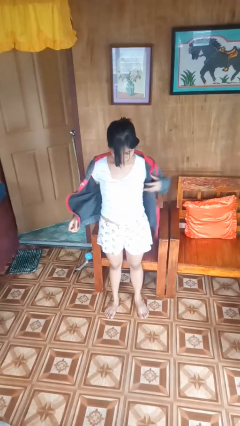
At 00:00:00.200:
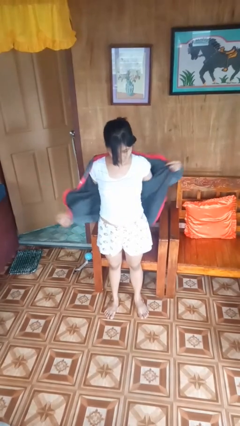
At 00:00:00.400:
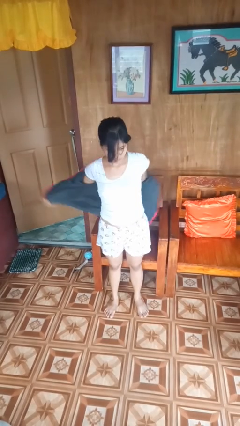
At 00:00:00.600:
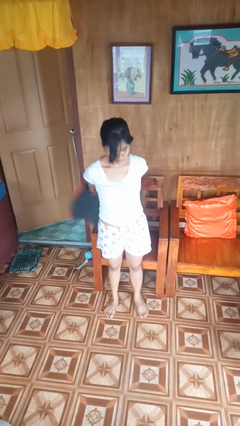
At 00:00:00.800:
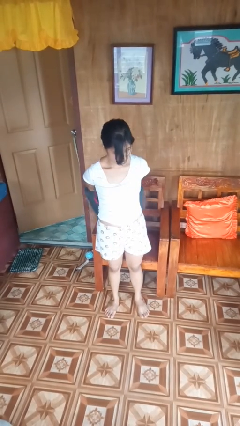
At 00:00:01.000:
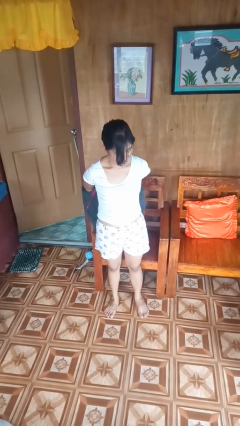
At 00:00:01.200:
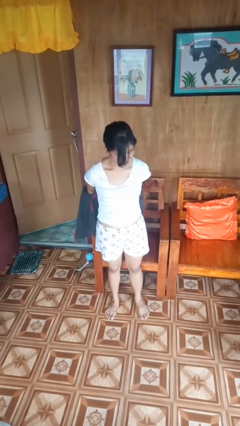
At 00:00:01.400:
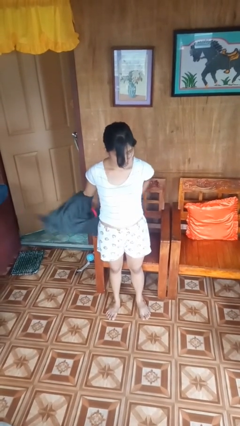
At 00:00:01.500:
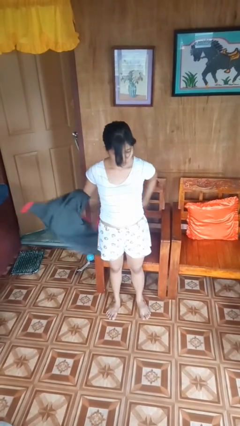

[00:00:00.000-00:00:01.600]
person takes off jacket

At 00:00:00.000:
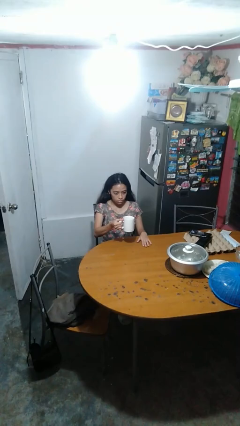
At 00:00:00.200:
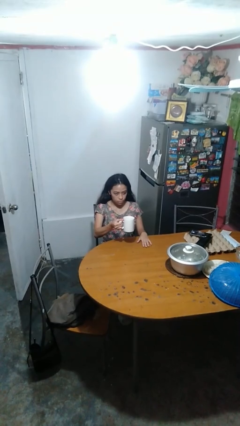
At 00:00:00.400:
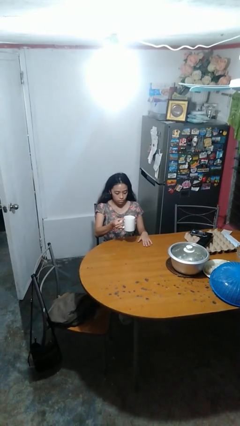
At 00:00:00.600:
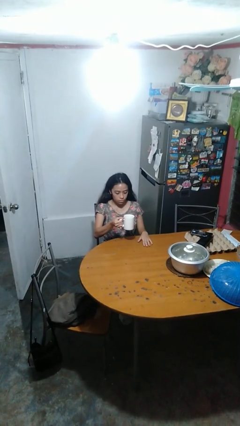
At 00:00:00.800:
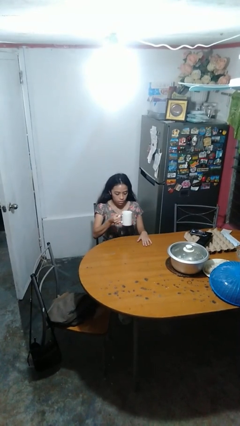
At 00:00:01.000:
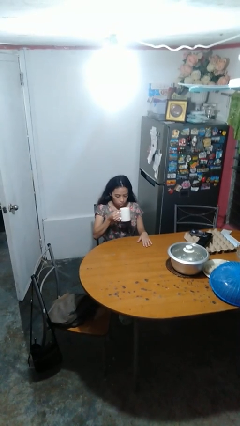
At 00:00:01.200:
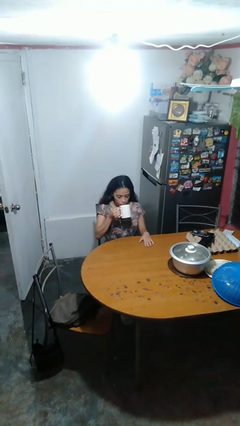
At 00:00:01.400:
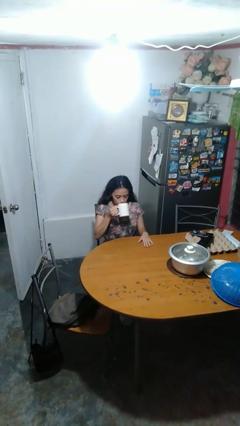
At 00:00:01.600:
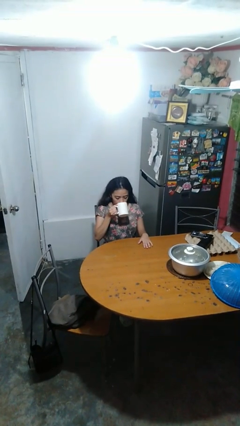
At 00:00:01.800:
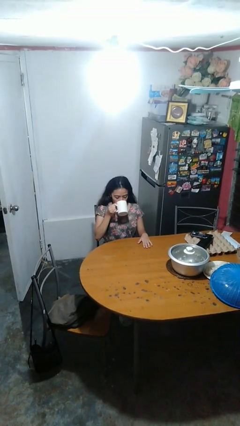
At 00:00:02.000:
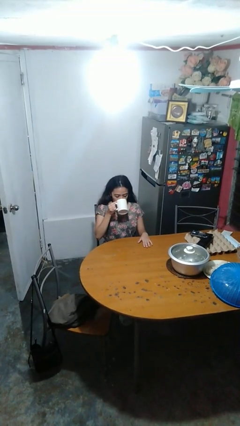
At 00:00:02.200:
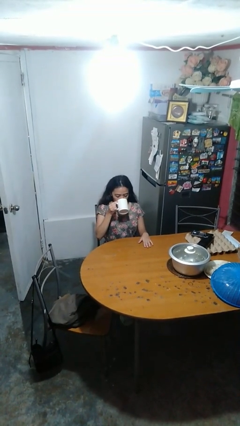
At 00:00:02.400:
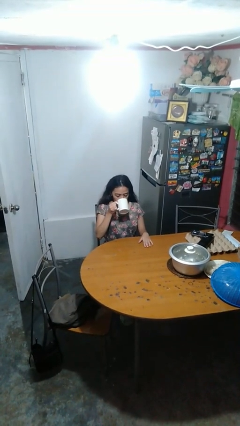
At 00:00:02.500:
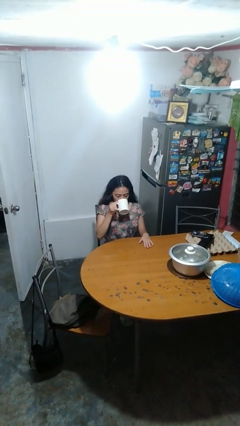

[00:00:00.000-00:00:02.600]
person drinks from mug

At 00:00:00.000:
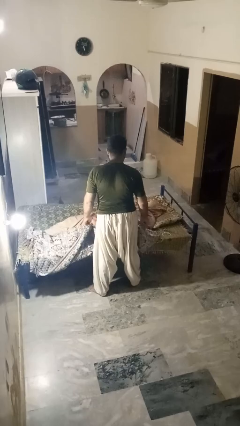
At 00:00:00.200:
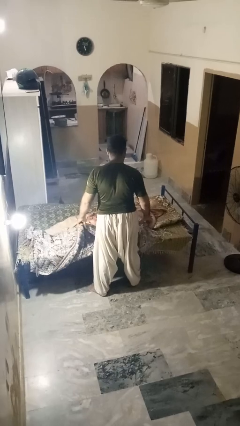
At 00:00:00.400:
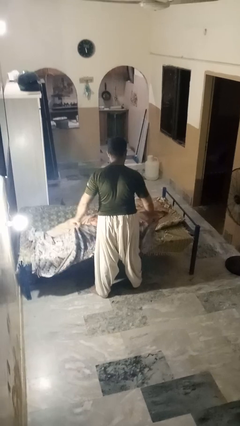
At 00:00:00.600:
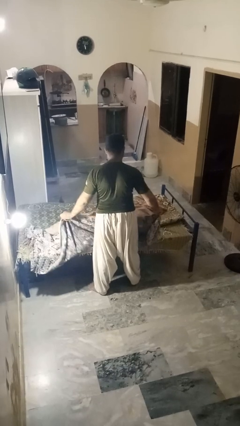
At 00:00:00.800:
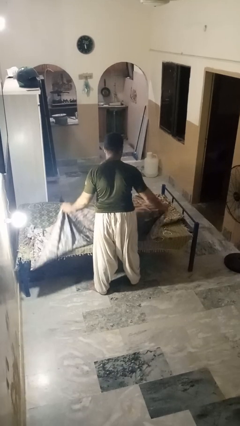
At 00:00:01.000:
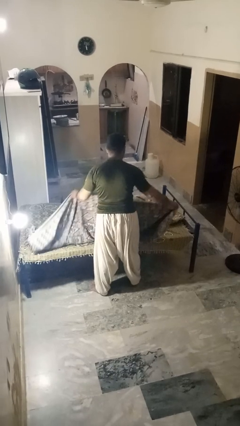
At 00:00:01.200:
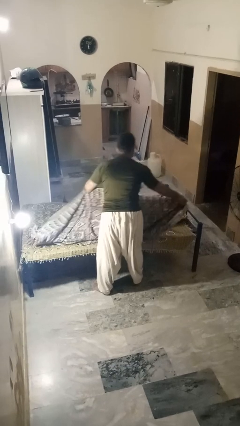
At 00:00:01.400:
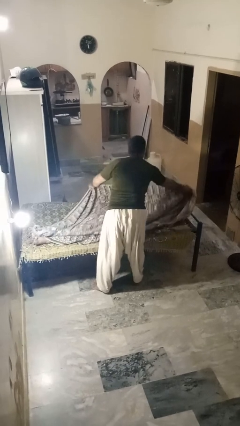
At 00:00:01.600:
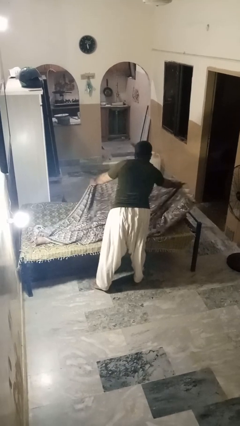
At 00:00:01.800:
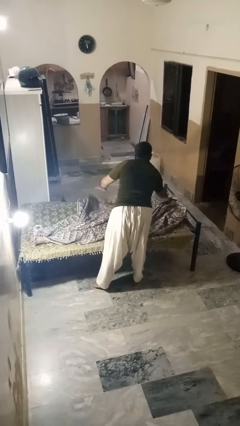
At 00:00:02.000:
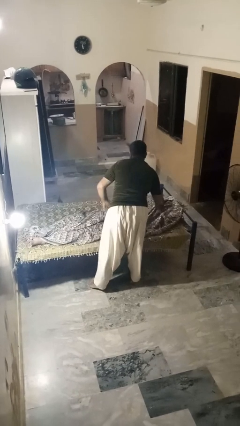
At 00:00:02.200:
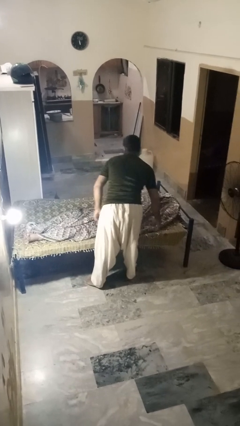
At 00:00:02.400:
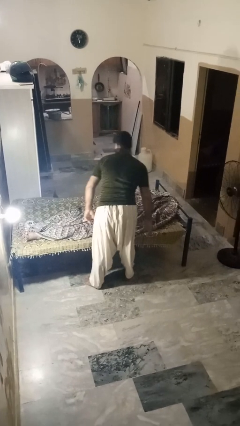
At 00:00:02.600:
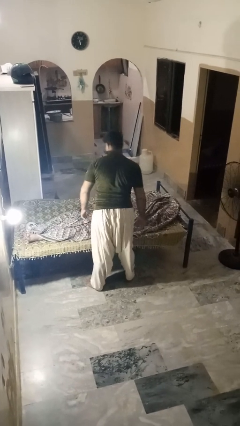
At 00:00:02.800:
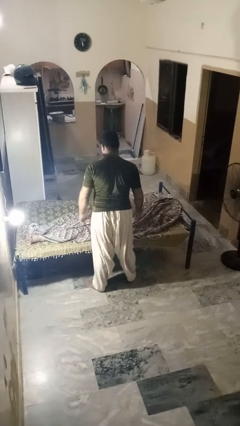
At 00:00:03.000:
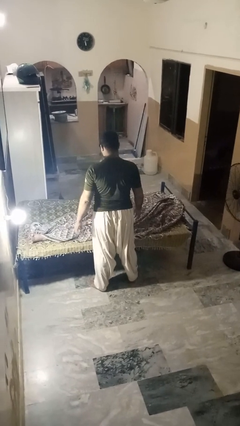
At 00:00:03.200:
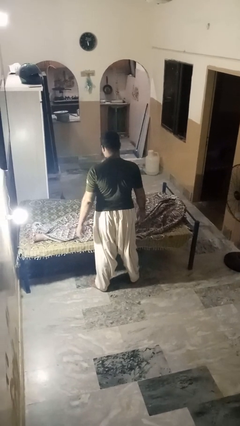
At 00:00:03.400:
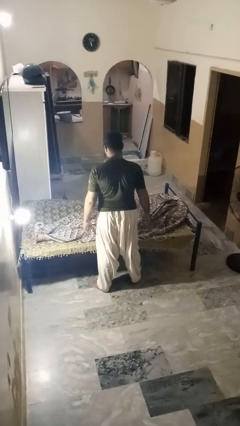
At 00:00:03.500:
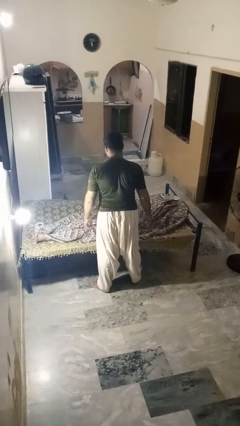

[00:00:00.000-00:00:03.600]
person covers friend with blanket

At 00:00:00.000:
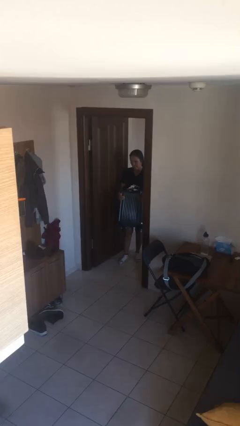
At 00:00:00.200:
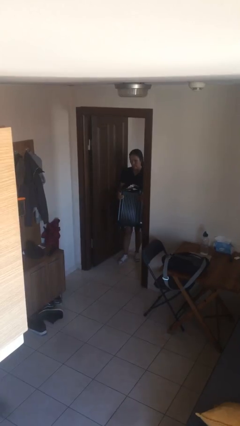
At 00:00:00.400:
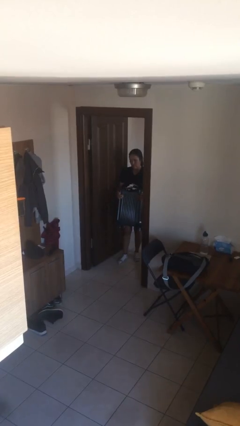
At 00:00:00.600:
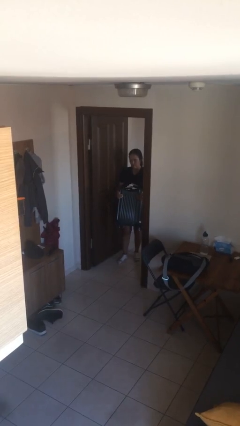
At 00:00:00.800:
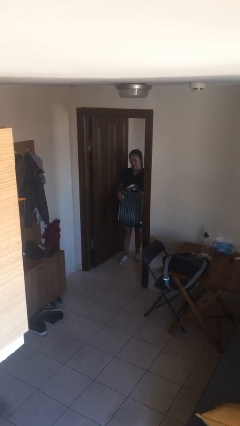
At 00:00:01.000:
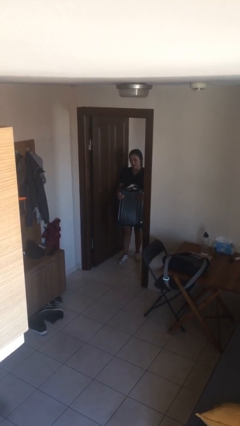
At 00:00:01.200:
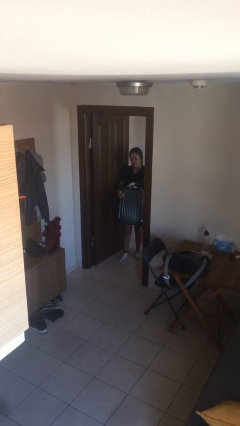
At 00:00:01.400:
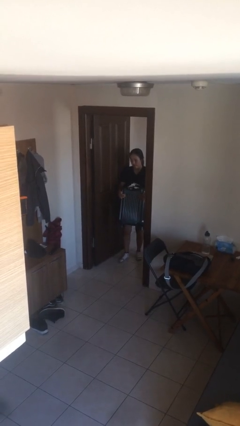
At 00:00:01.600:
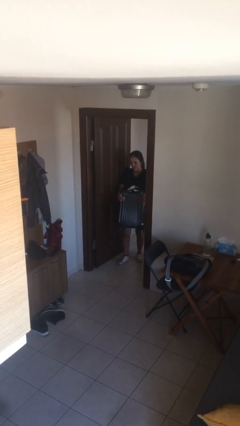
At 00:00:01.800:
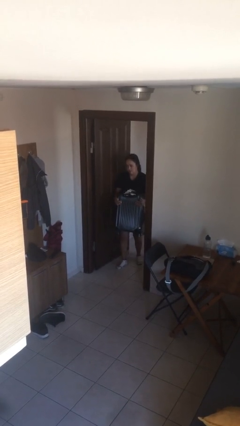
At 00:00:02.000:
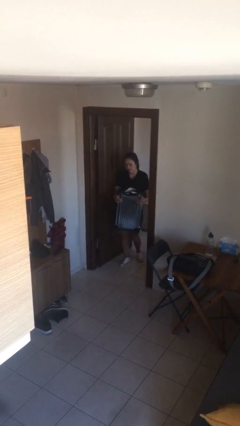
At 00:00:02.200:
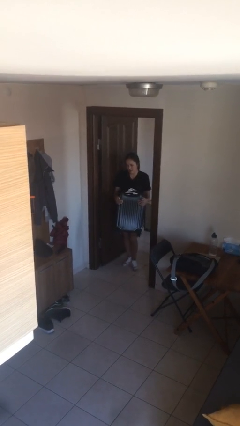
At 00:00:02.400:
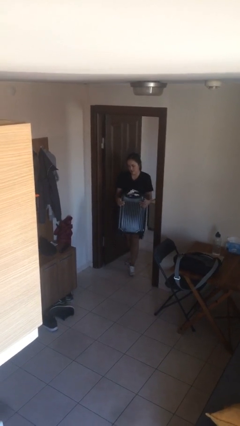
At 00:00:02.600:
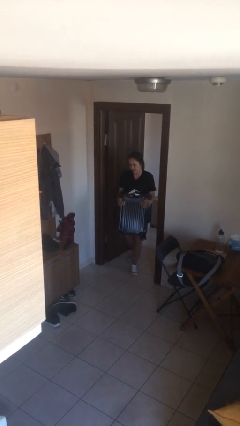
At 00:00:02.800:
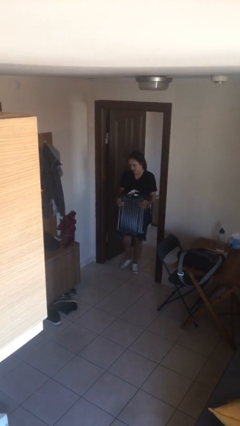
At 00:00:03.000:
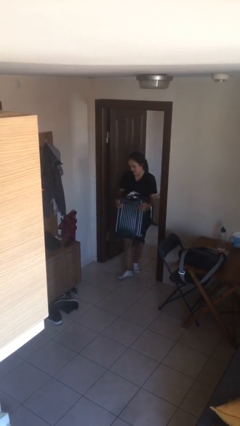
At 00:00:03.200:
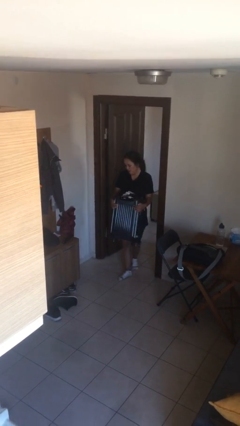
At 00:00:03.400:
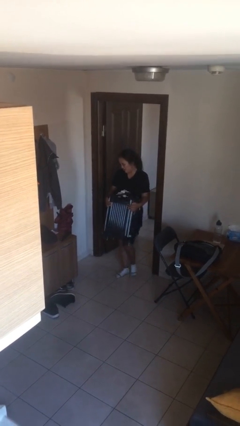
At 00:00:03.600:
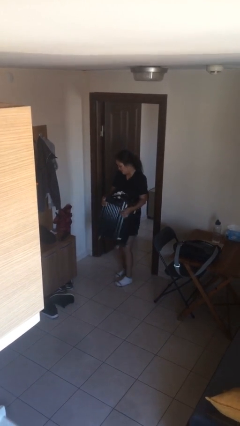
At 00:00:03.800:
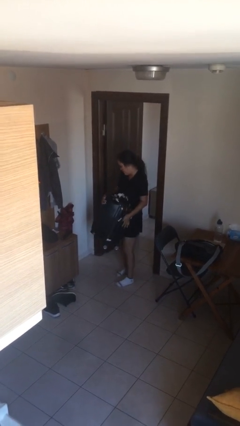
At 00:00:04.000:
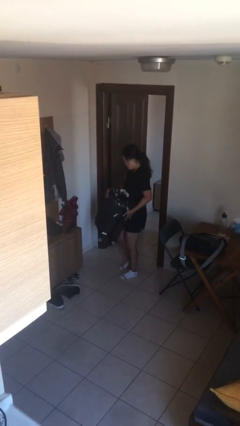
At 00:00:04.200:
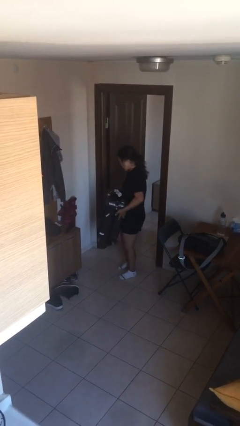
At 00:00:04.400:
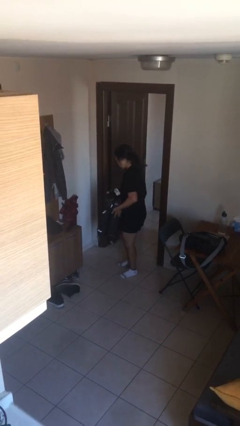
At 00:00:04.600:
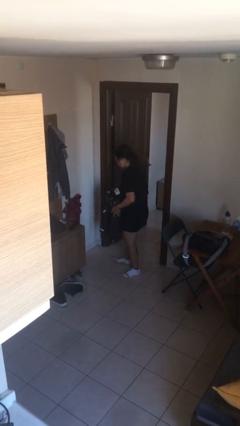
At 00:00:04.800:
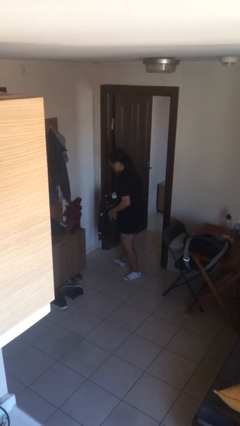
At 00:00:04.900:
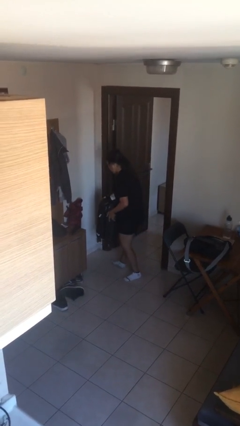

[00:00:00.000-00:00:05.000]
person carries heavy object

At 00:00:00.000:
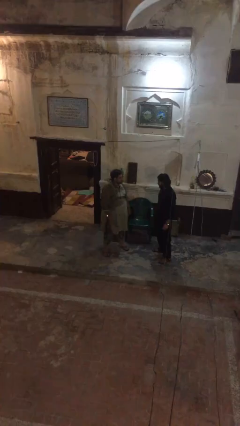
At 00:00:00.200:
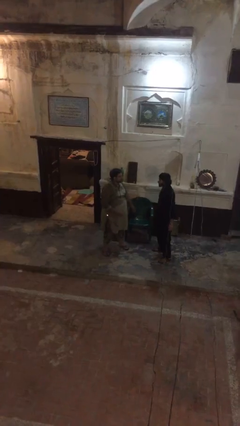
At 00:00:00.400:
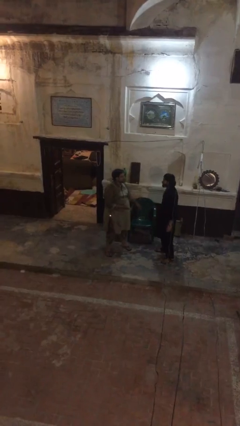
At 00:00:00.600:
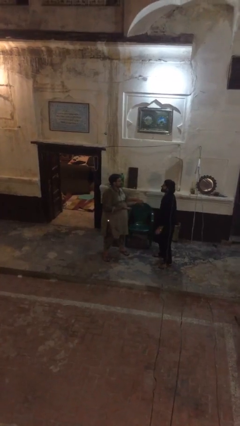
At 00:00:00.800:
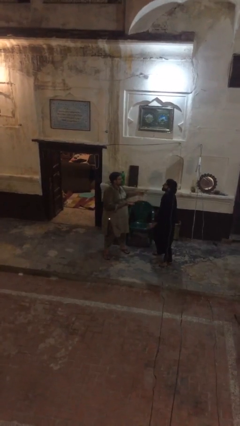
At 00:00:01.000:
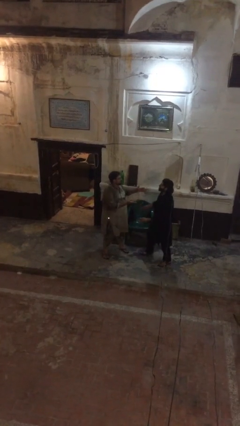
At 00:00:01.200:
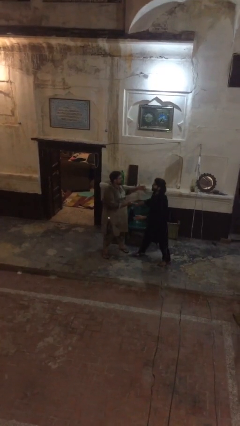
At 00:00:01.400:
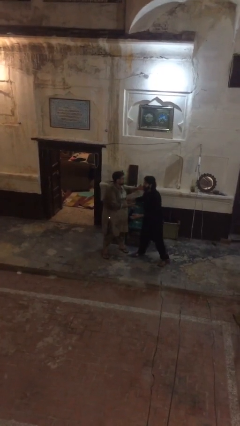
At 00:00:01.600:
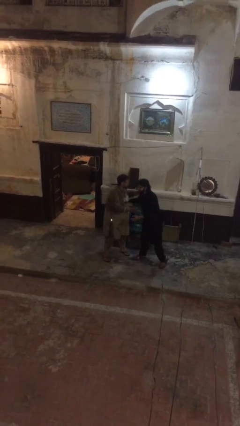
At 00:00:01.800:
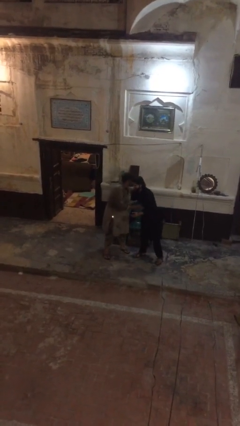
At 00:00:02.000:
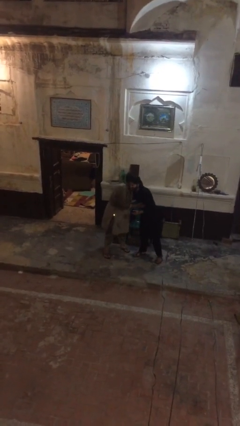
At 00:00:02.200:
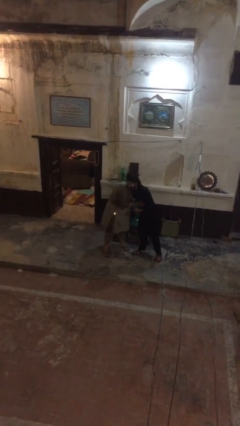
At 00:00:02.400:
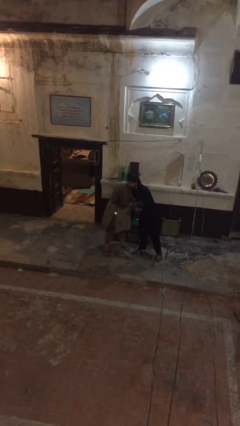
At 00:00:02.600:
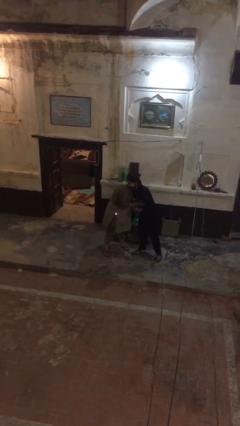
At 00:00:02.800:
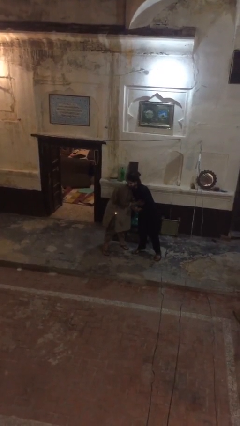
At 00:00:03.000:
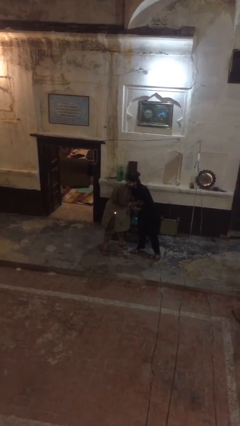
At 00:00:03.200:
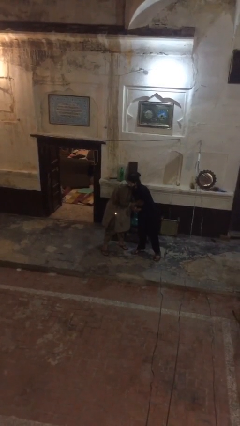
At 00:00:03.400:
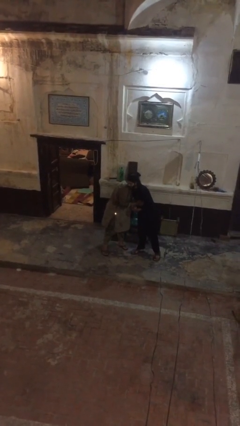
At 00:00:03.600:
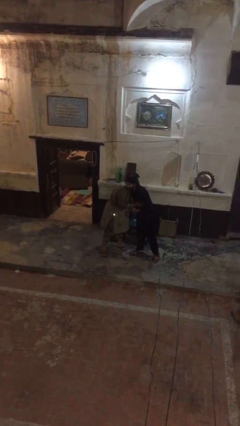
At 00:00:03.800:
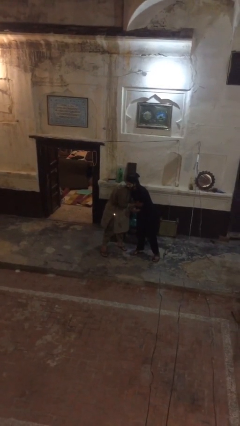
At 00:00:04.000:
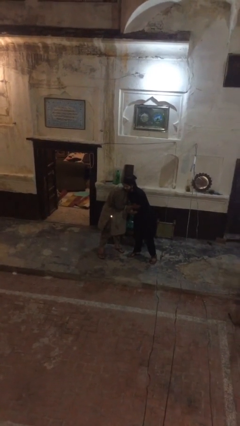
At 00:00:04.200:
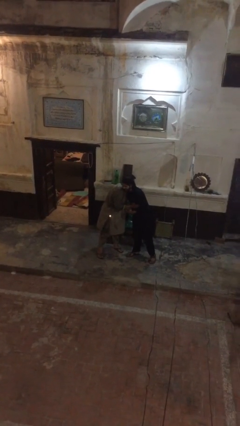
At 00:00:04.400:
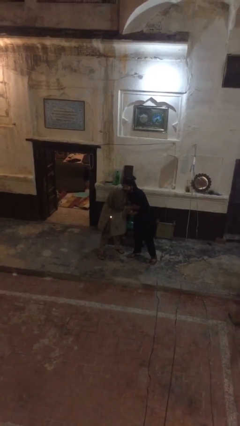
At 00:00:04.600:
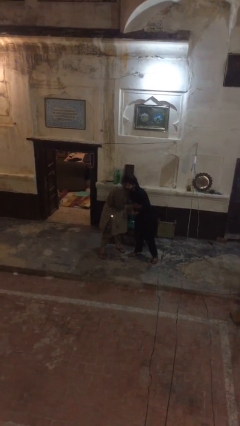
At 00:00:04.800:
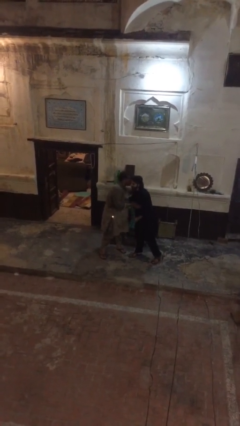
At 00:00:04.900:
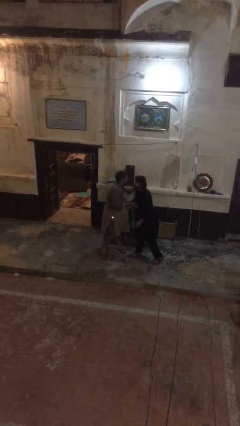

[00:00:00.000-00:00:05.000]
person embraces person
